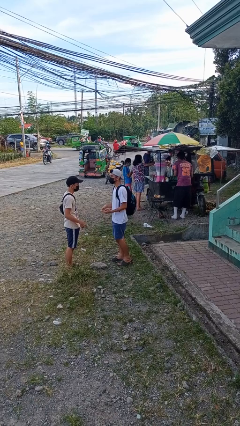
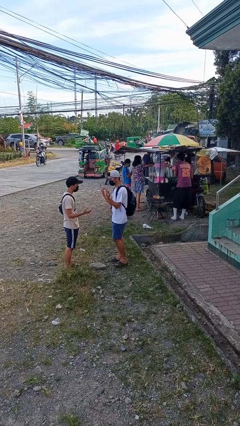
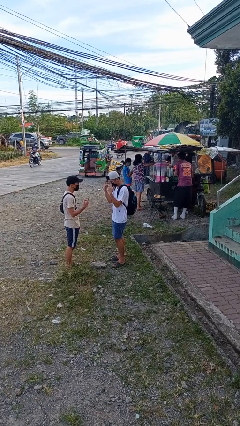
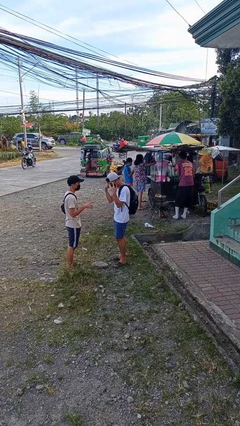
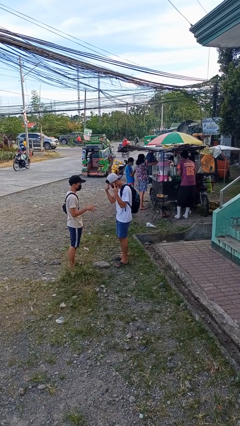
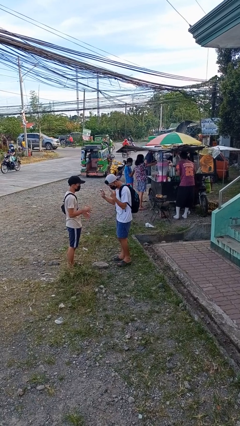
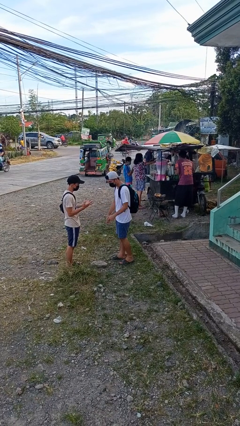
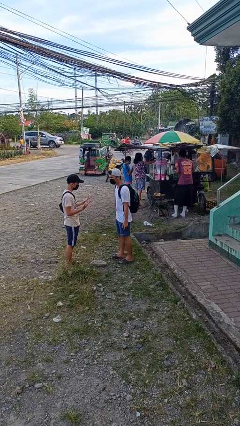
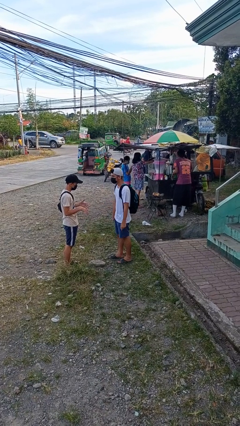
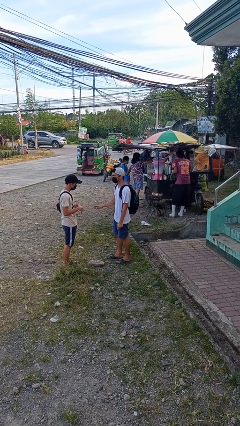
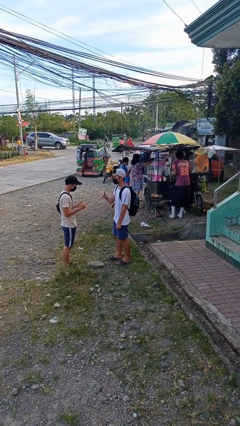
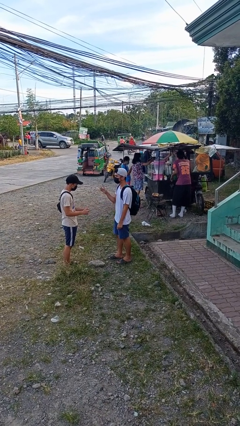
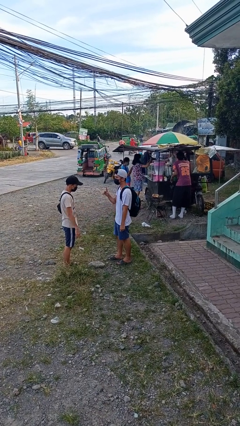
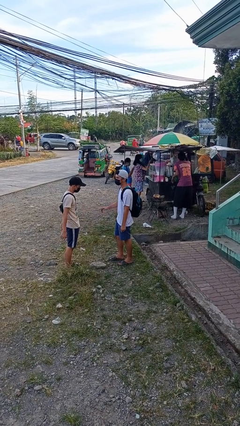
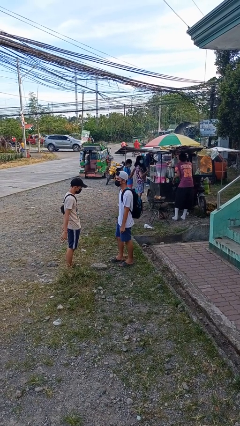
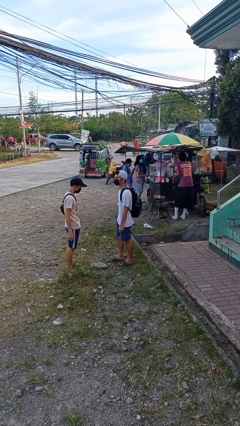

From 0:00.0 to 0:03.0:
person talks to person

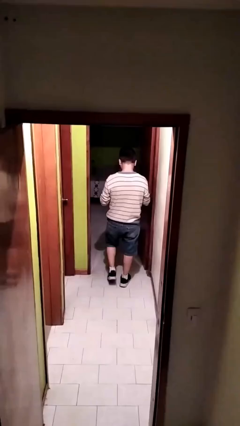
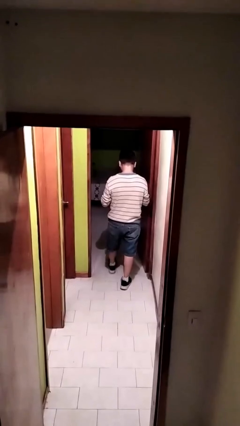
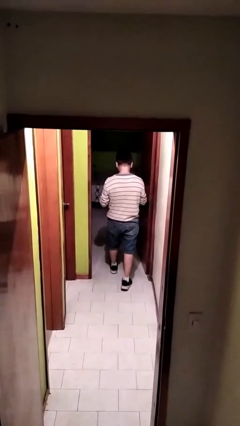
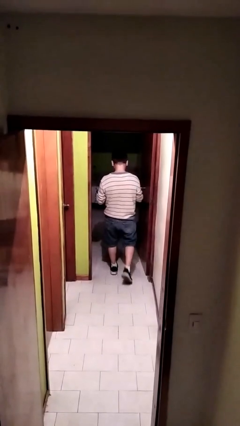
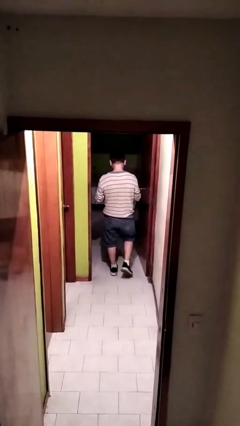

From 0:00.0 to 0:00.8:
person exits scene through structure

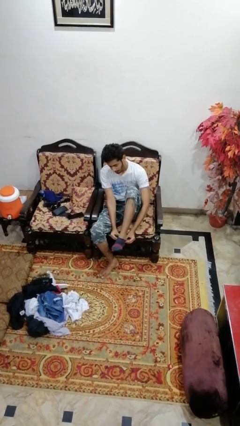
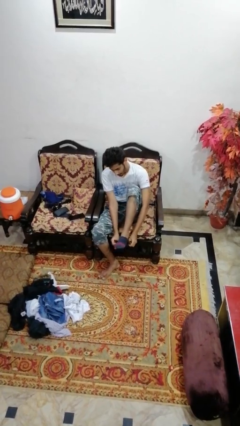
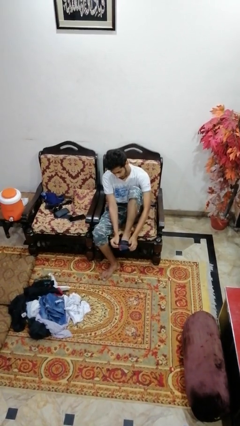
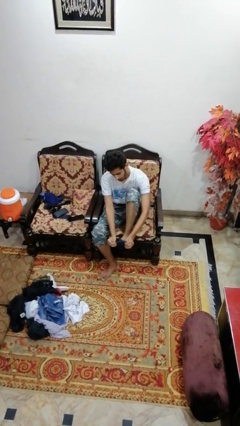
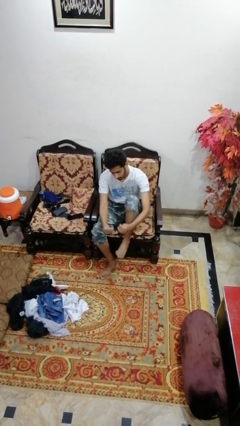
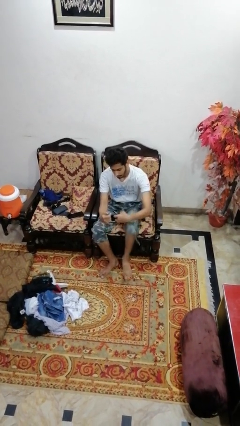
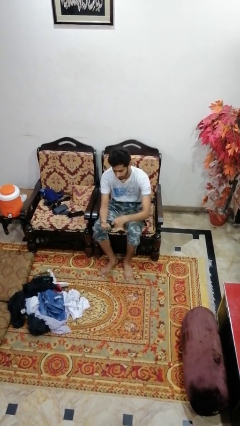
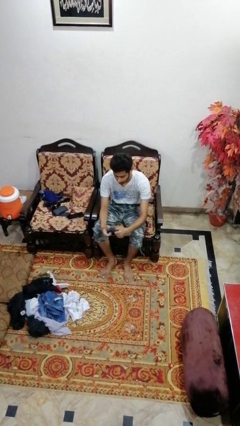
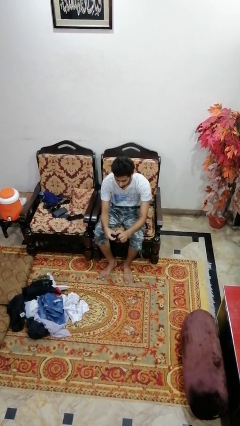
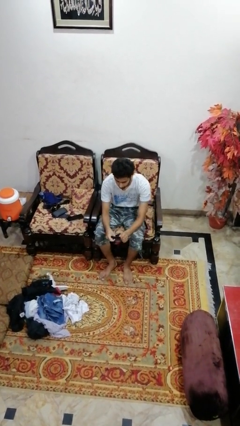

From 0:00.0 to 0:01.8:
person takes off socks

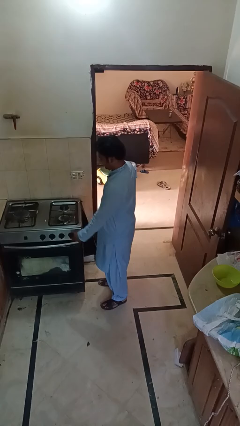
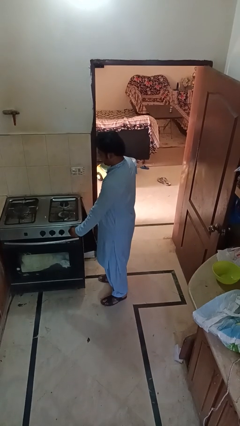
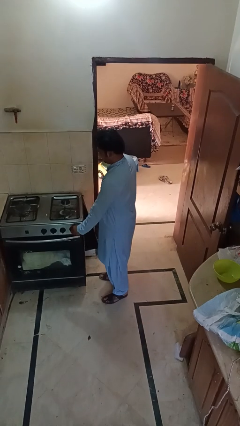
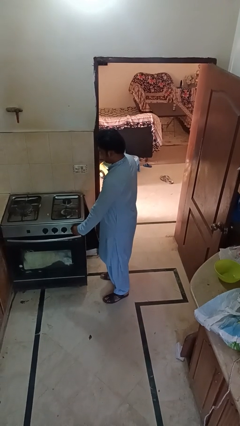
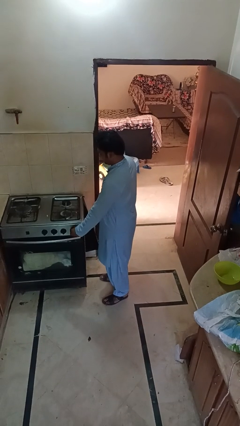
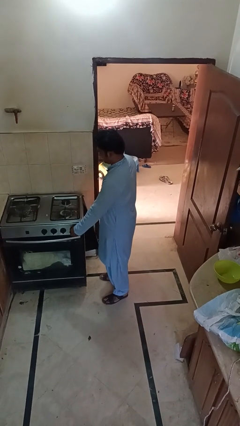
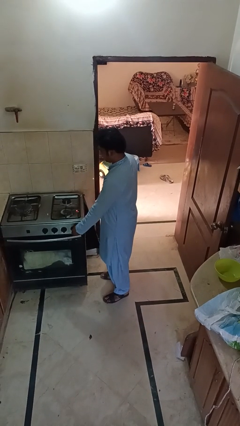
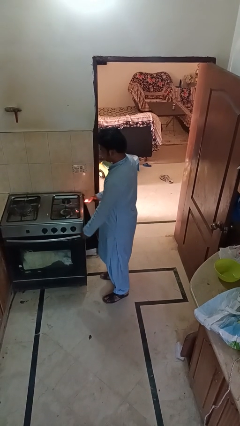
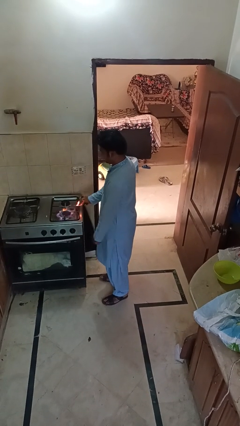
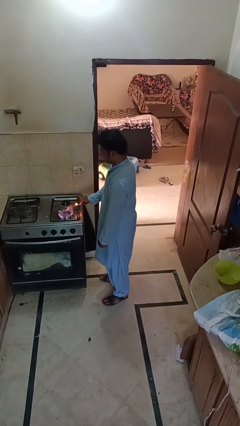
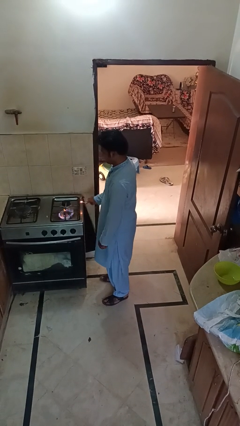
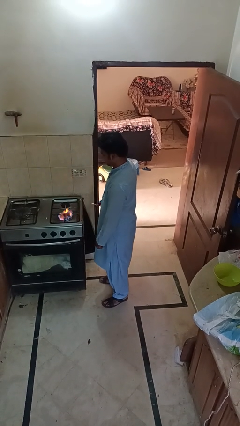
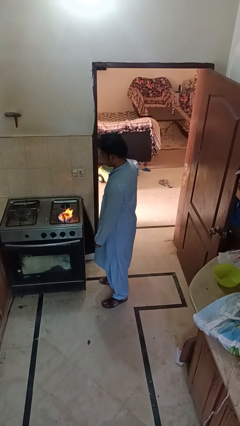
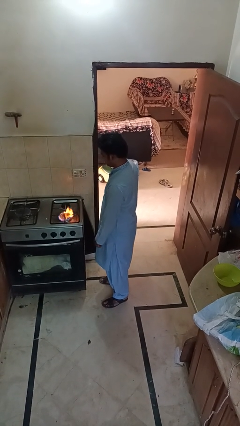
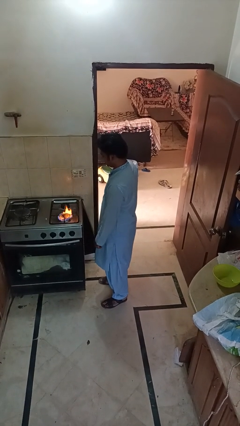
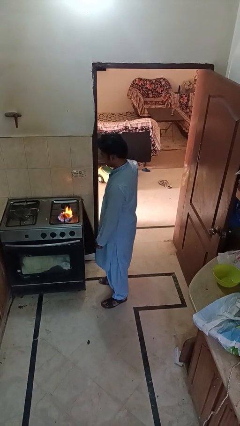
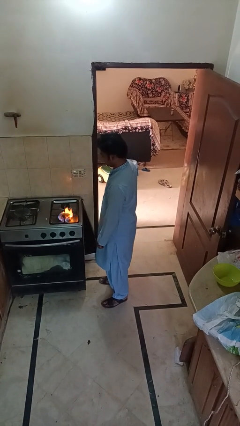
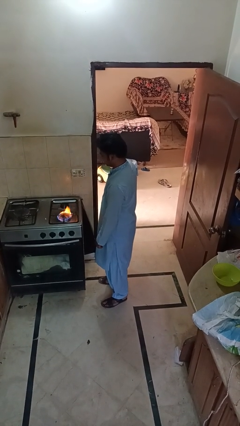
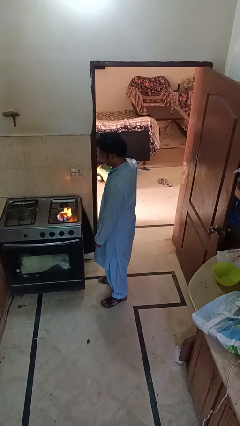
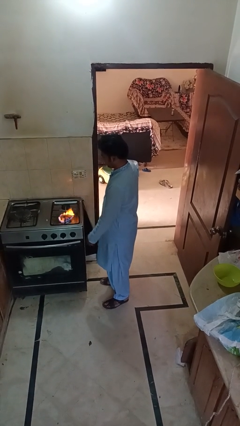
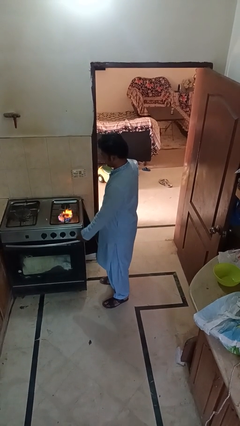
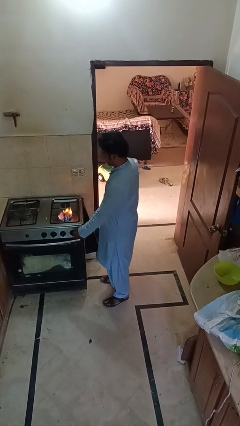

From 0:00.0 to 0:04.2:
person turns on stovetop

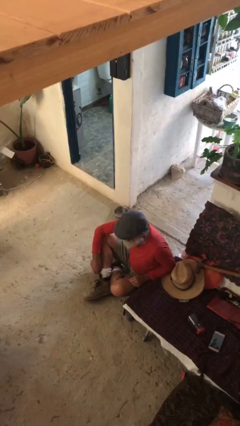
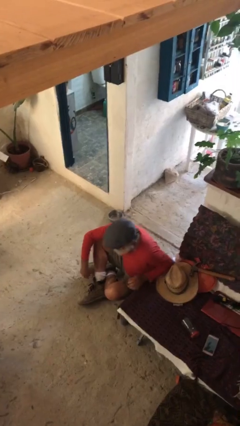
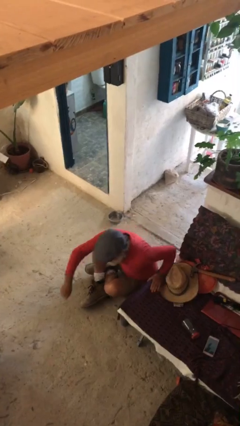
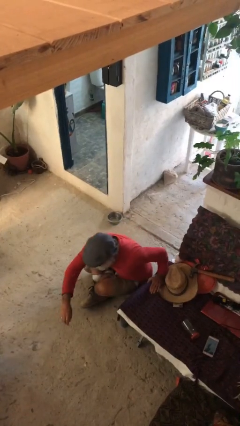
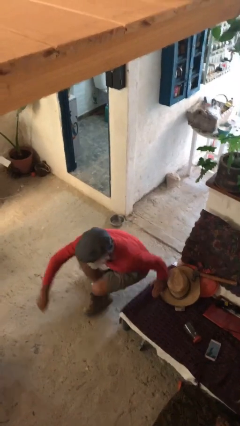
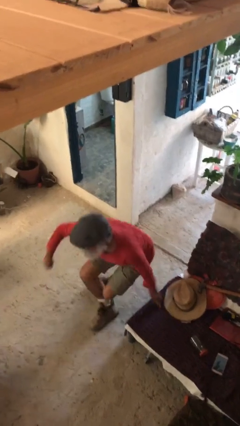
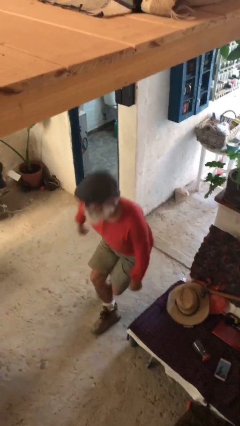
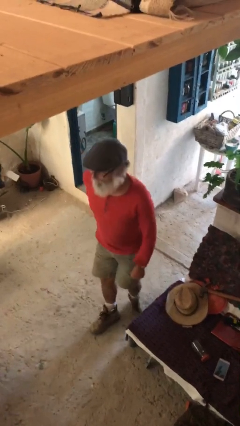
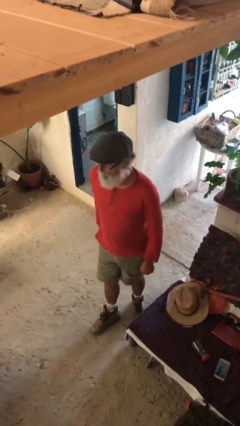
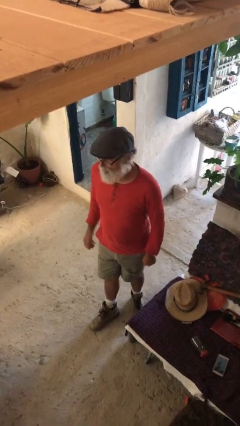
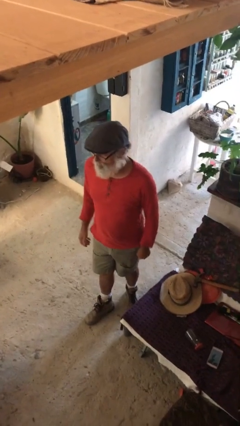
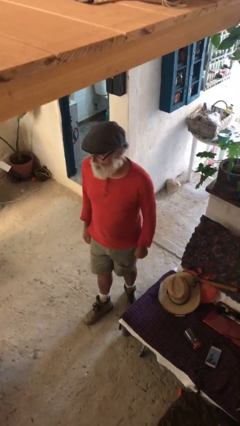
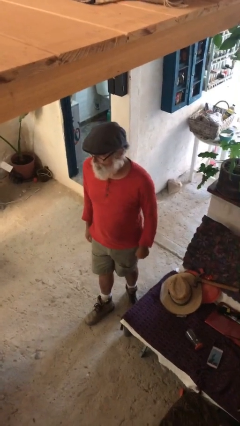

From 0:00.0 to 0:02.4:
person stands up

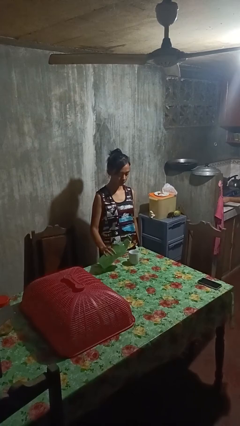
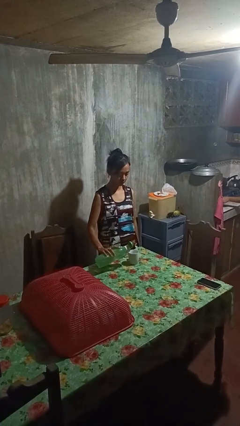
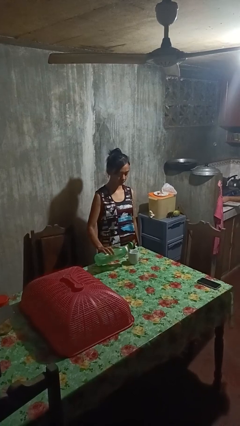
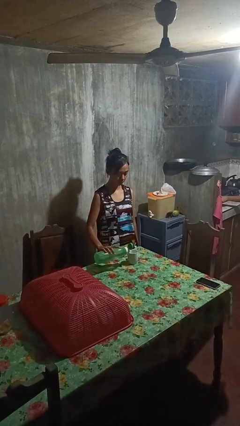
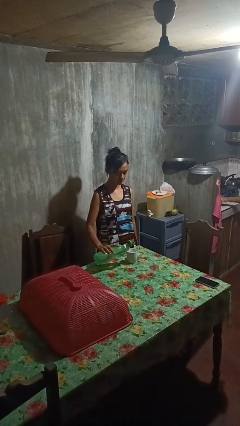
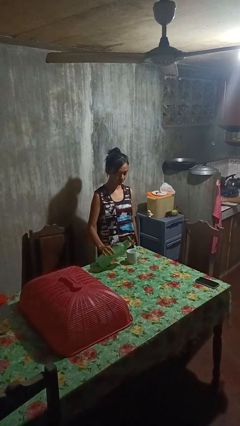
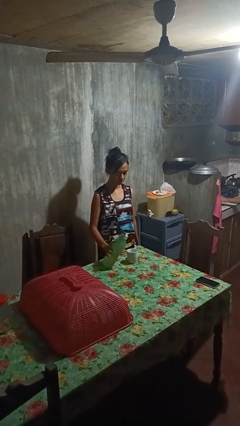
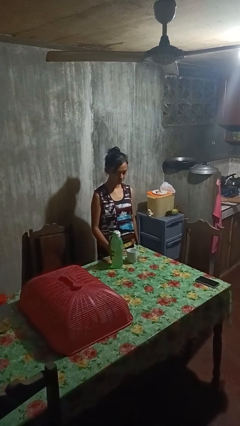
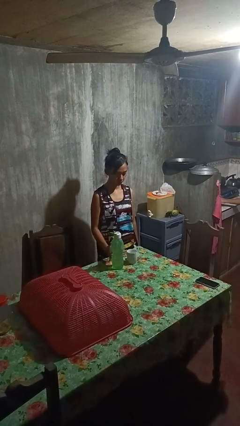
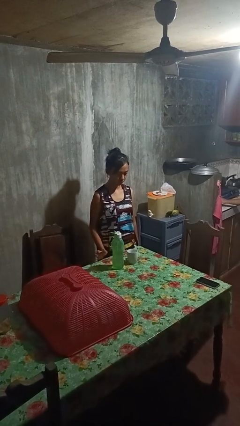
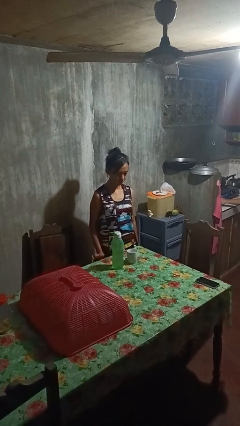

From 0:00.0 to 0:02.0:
person pours liquid into cup

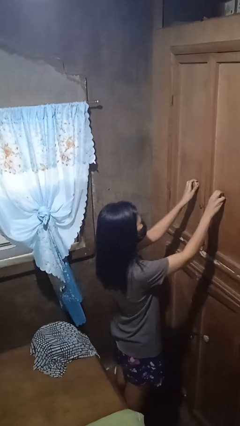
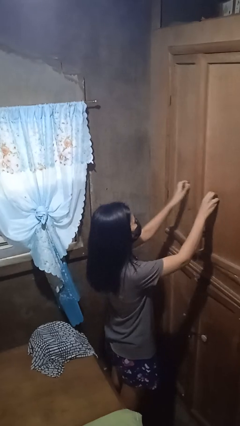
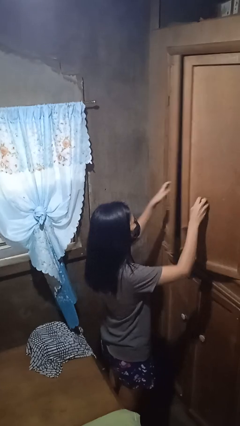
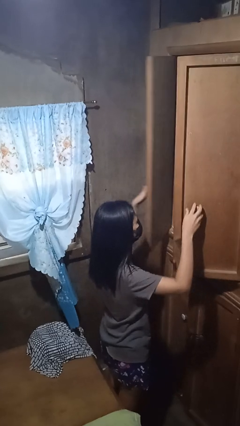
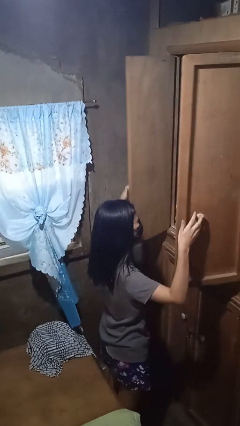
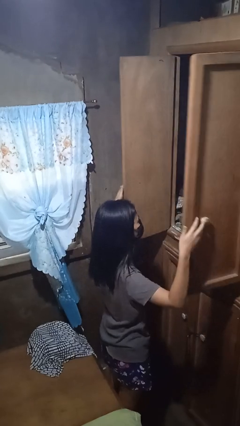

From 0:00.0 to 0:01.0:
person opens closet door

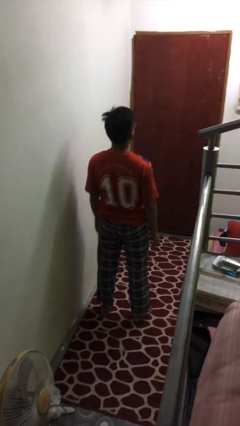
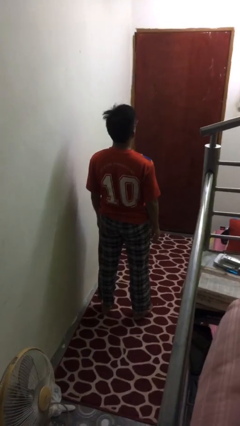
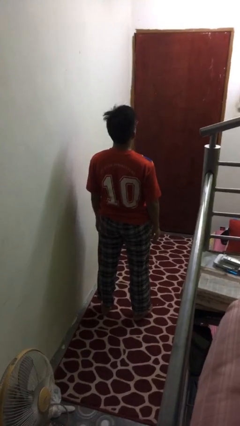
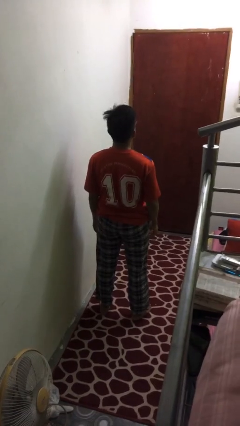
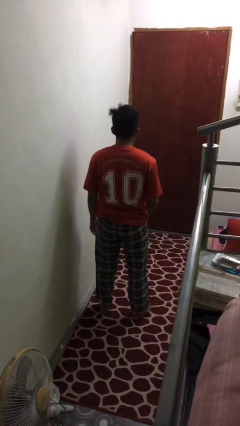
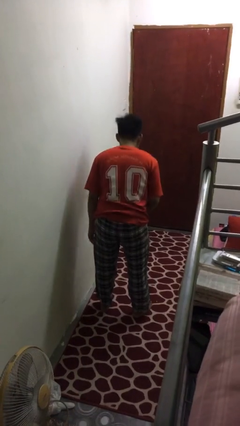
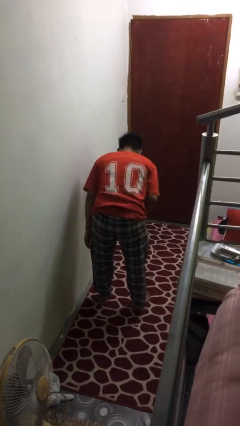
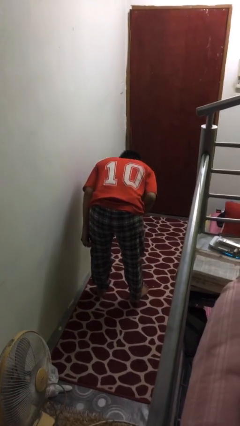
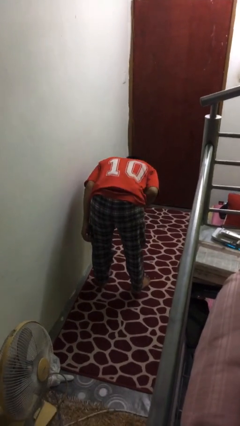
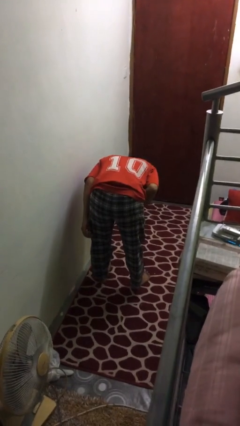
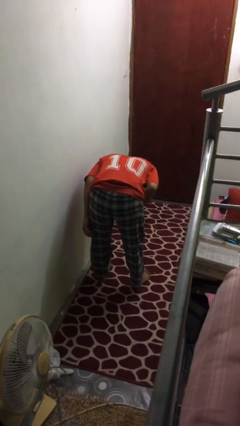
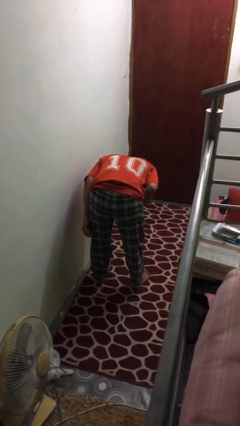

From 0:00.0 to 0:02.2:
person bows
